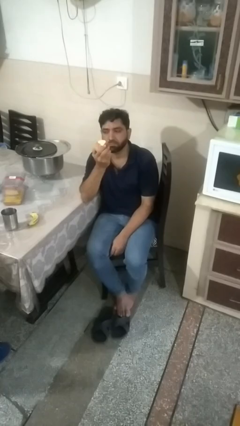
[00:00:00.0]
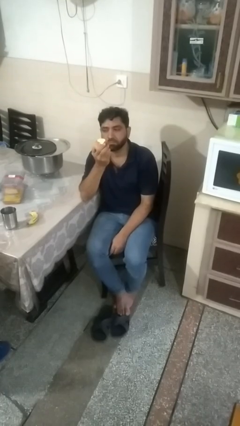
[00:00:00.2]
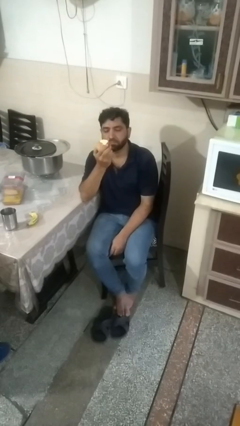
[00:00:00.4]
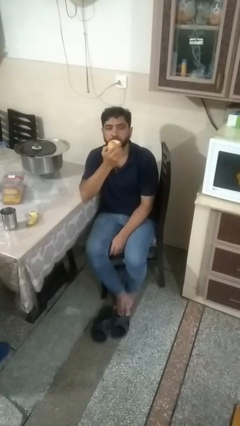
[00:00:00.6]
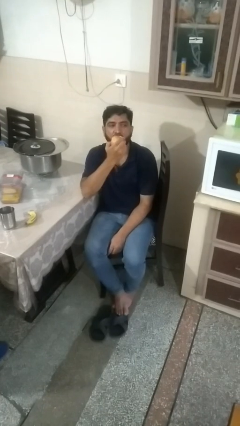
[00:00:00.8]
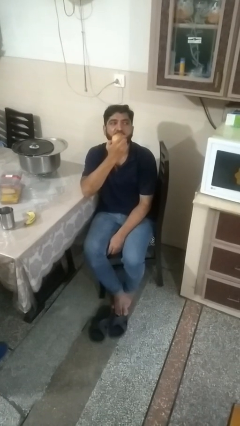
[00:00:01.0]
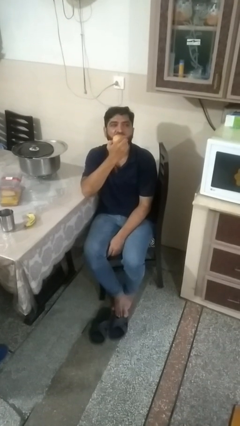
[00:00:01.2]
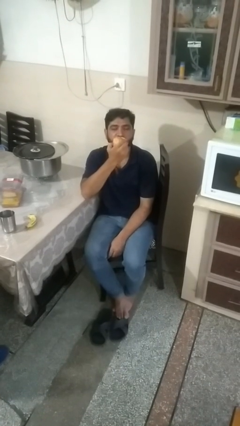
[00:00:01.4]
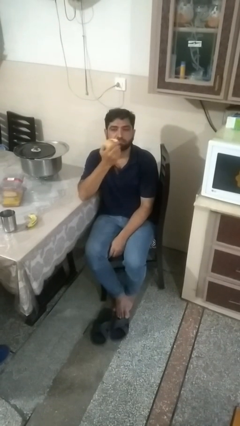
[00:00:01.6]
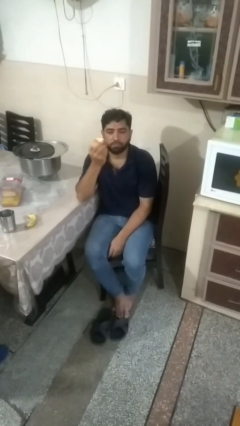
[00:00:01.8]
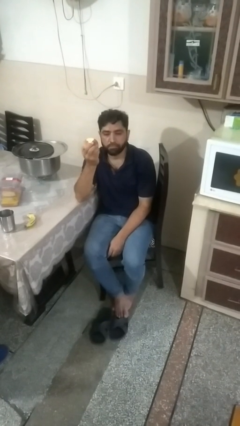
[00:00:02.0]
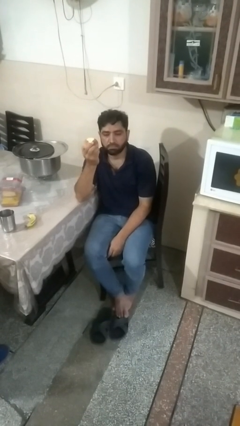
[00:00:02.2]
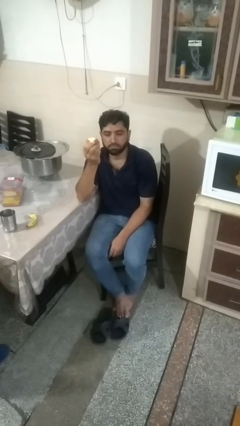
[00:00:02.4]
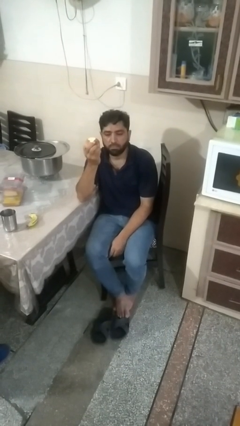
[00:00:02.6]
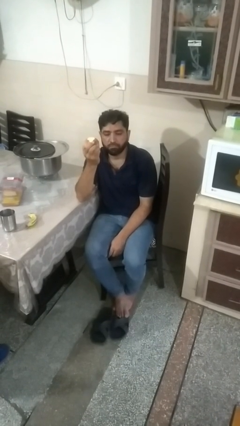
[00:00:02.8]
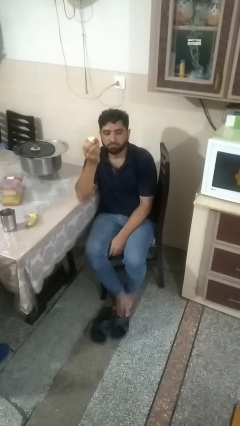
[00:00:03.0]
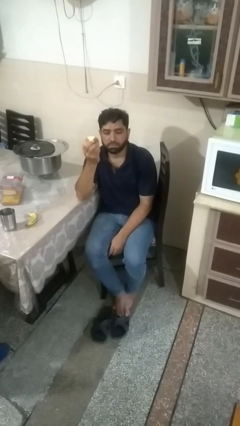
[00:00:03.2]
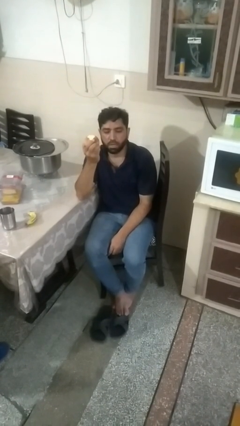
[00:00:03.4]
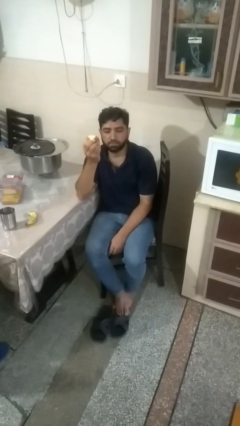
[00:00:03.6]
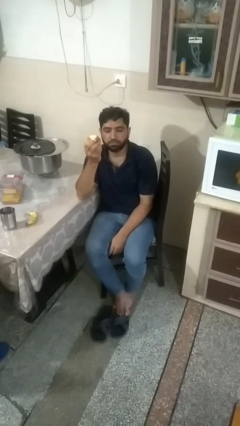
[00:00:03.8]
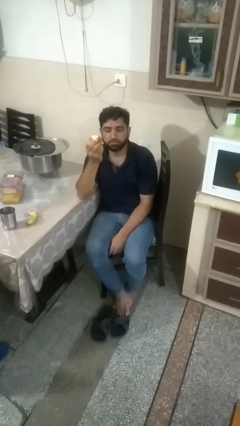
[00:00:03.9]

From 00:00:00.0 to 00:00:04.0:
person eats apple

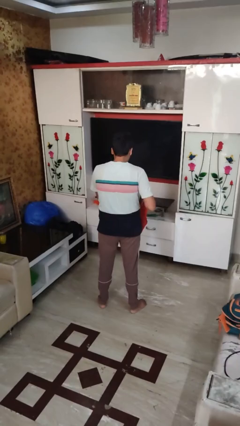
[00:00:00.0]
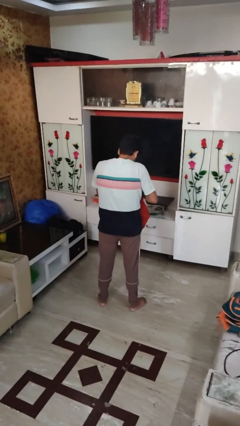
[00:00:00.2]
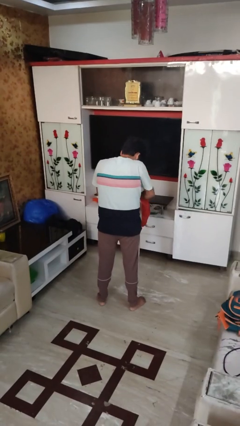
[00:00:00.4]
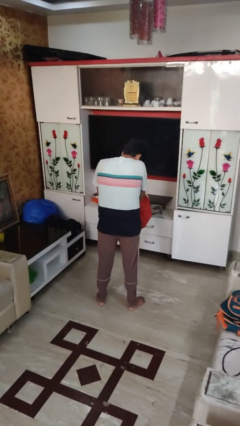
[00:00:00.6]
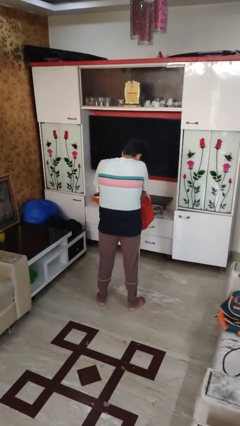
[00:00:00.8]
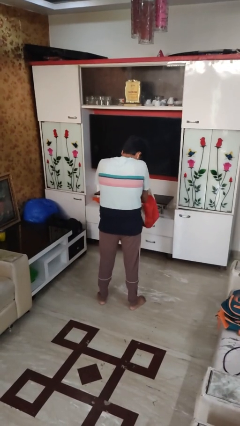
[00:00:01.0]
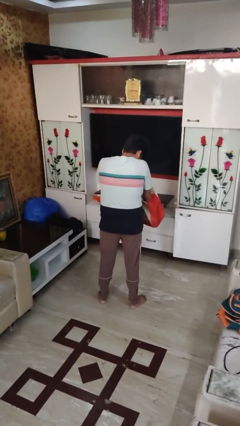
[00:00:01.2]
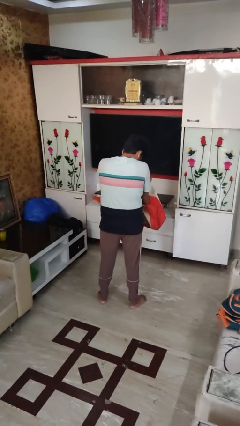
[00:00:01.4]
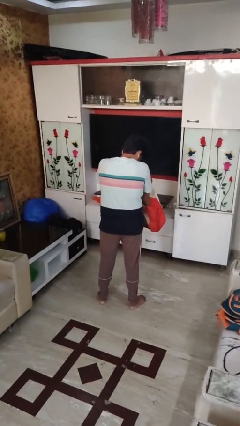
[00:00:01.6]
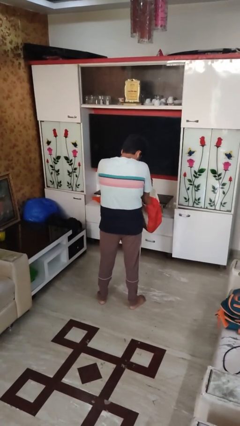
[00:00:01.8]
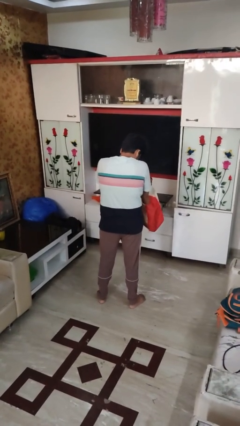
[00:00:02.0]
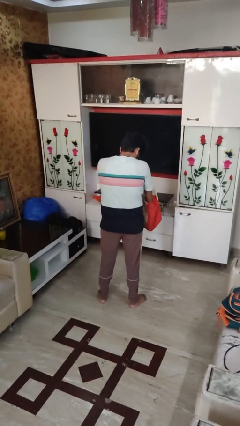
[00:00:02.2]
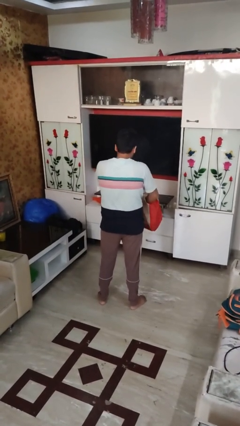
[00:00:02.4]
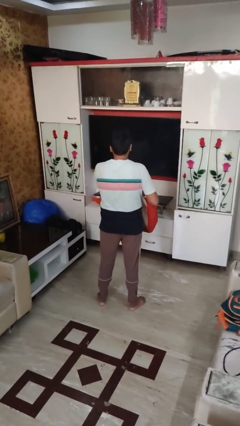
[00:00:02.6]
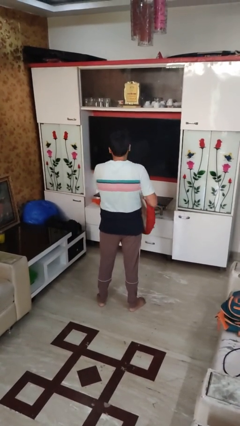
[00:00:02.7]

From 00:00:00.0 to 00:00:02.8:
person searches in bag

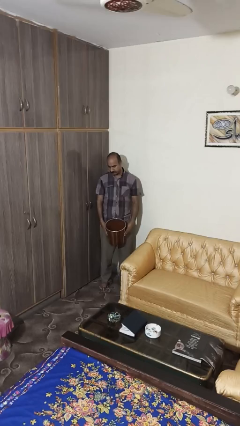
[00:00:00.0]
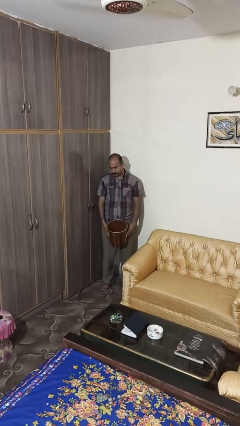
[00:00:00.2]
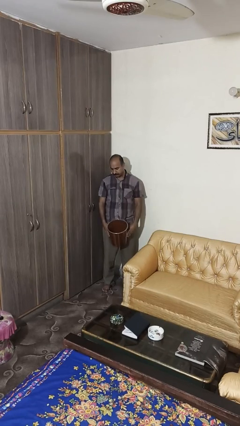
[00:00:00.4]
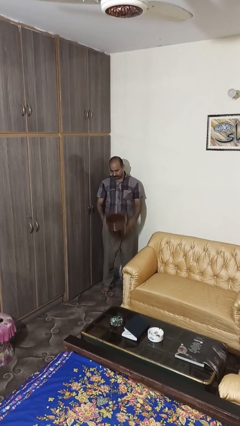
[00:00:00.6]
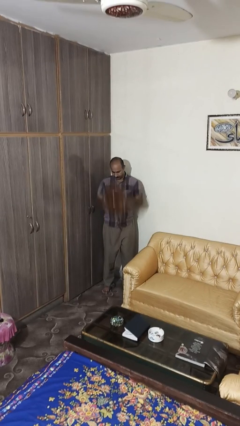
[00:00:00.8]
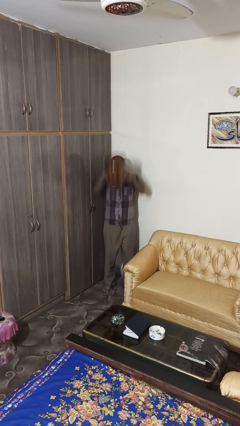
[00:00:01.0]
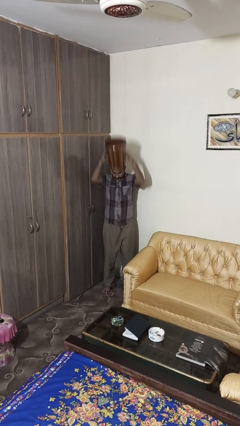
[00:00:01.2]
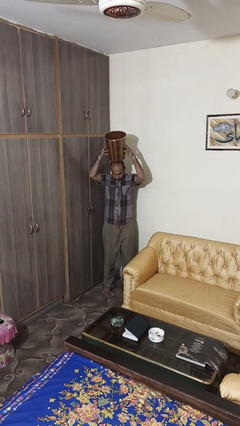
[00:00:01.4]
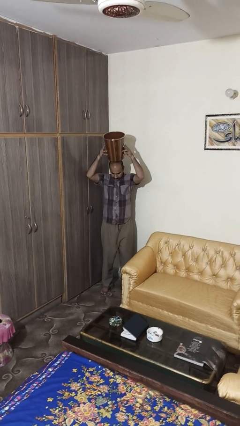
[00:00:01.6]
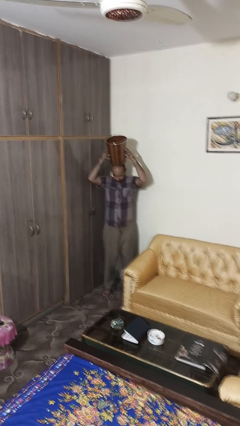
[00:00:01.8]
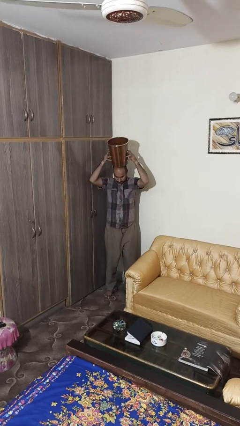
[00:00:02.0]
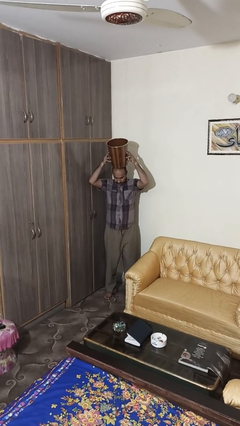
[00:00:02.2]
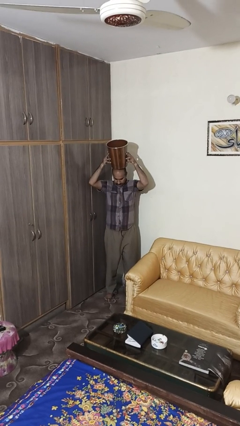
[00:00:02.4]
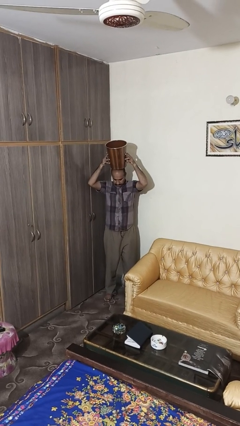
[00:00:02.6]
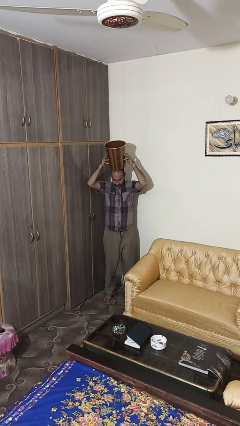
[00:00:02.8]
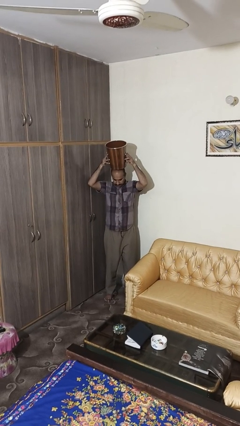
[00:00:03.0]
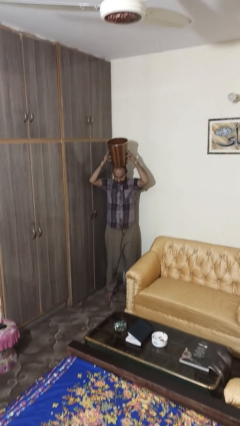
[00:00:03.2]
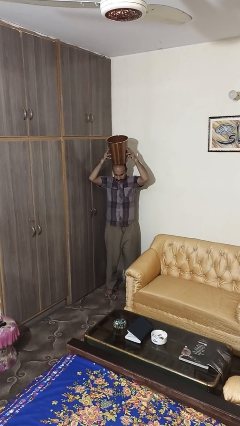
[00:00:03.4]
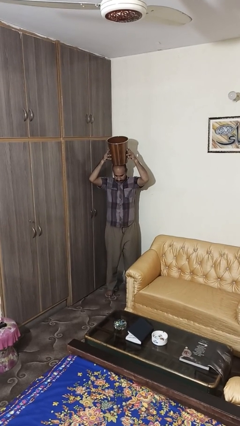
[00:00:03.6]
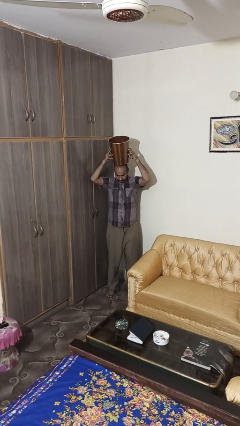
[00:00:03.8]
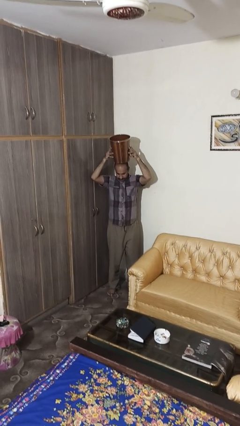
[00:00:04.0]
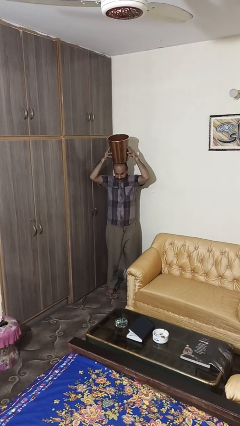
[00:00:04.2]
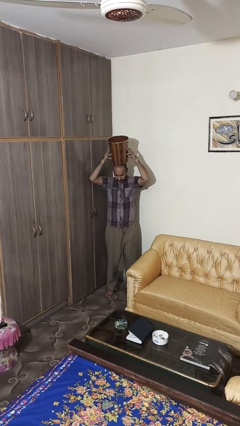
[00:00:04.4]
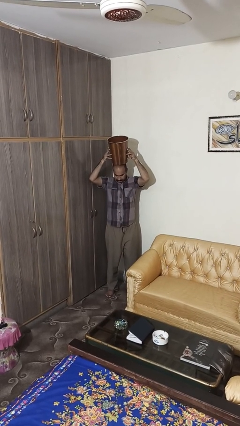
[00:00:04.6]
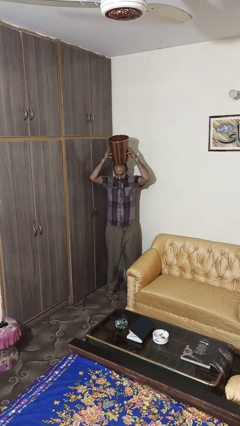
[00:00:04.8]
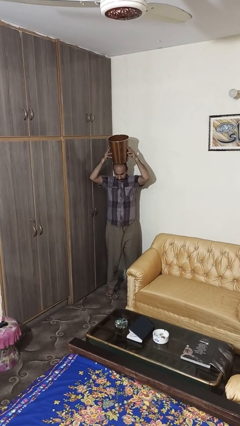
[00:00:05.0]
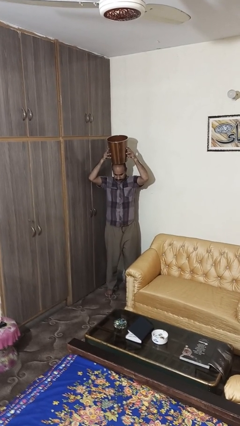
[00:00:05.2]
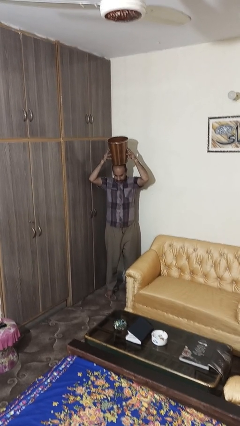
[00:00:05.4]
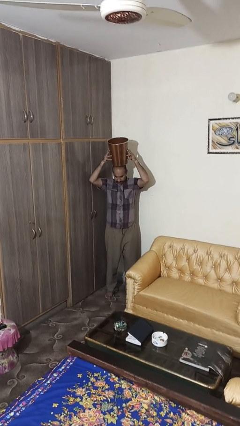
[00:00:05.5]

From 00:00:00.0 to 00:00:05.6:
person holds object above head

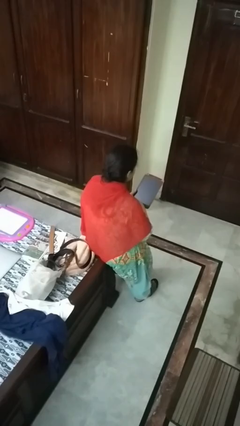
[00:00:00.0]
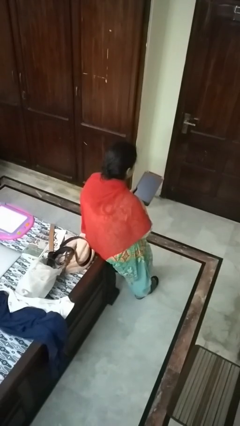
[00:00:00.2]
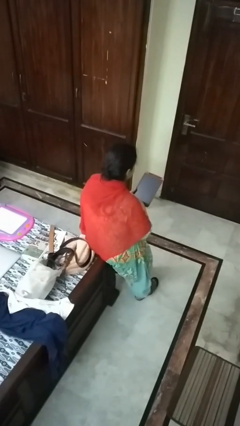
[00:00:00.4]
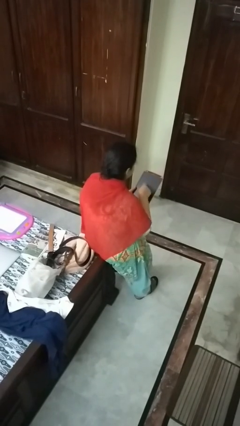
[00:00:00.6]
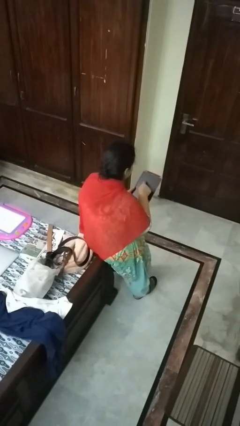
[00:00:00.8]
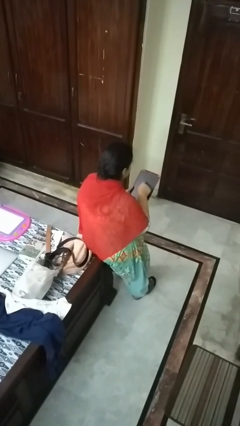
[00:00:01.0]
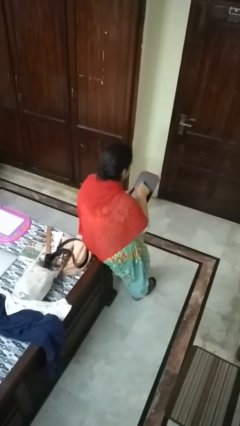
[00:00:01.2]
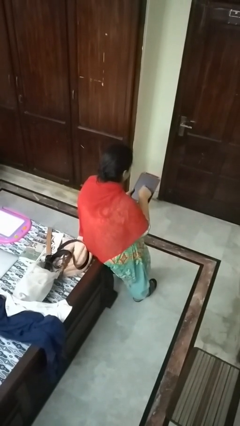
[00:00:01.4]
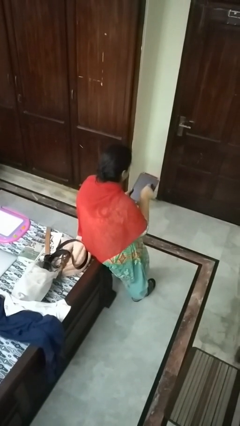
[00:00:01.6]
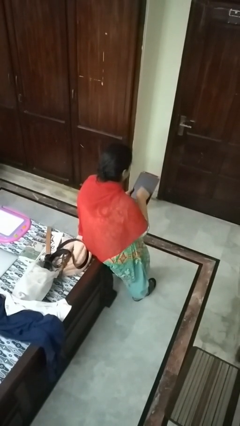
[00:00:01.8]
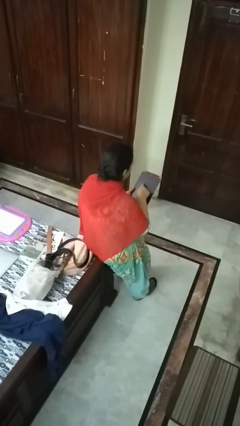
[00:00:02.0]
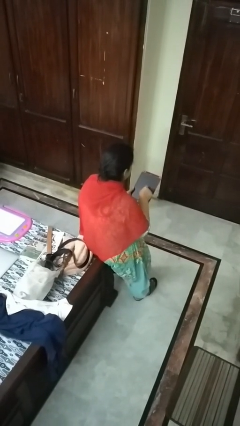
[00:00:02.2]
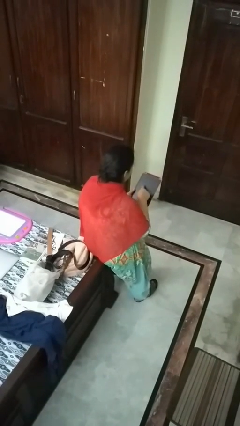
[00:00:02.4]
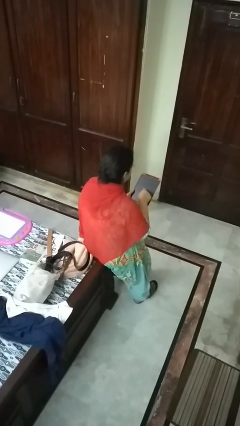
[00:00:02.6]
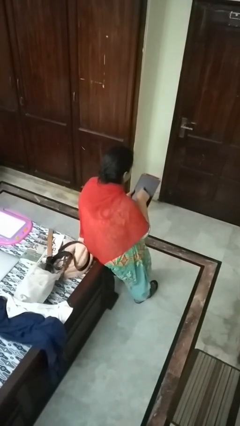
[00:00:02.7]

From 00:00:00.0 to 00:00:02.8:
person interacts with tablet

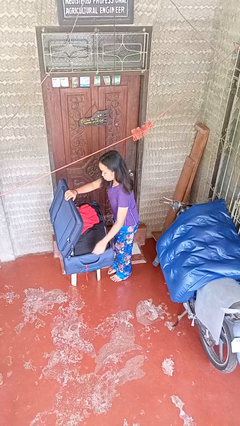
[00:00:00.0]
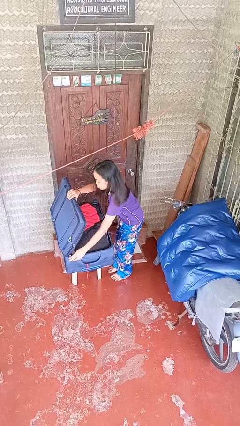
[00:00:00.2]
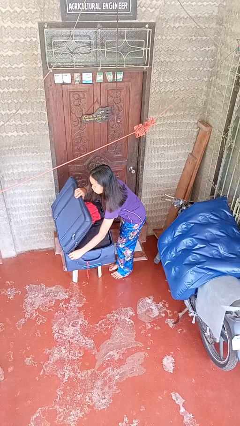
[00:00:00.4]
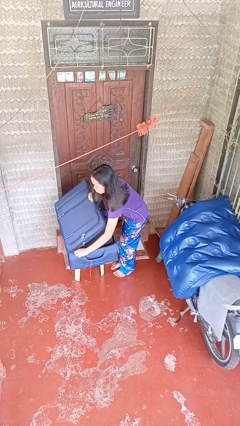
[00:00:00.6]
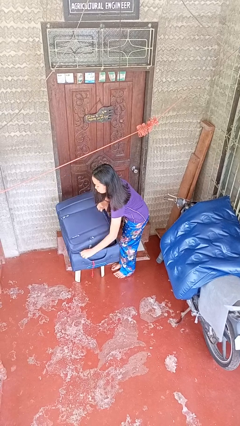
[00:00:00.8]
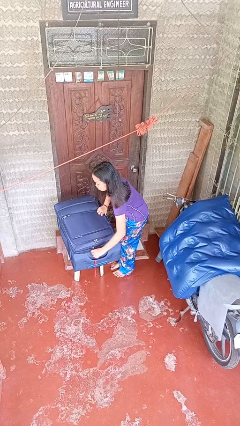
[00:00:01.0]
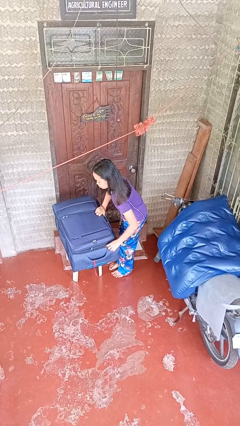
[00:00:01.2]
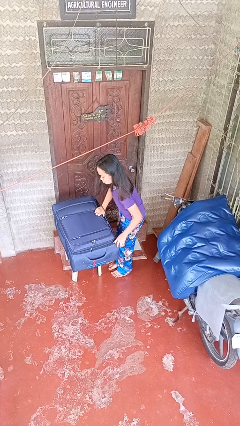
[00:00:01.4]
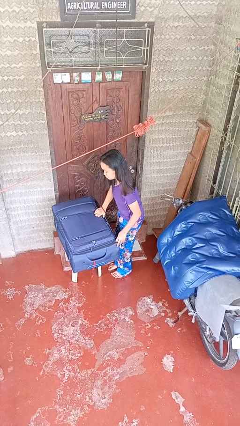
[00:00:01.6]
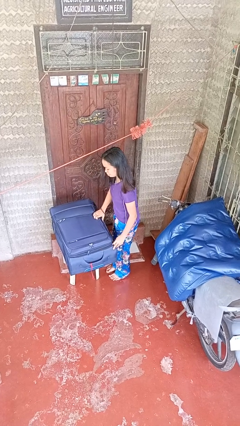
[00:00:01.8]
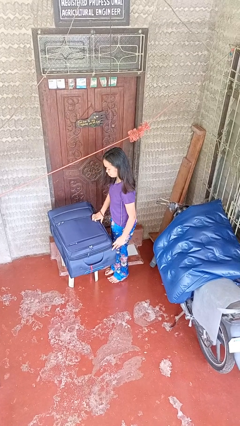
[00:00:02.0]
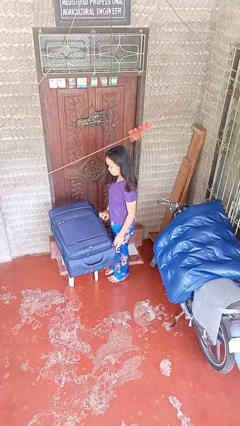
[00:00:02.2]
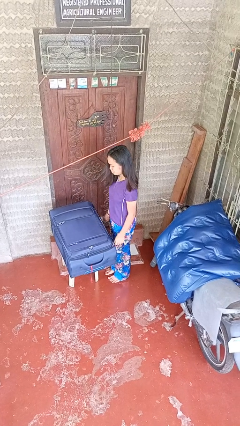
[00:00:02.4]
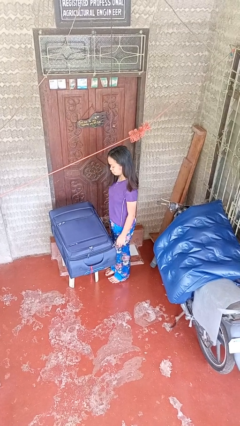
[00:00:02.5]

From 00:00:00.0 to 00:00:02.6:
person closes suitcase
